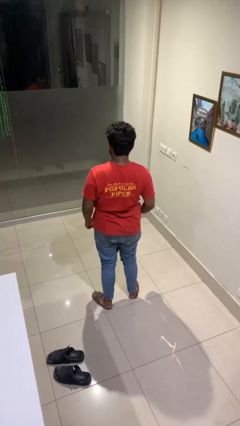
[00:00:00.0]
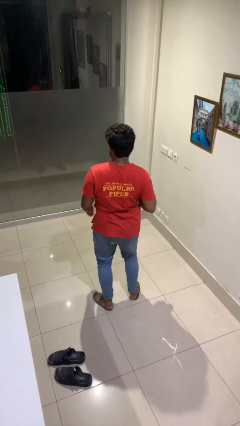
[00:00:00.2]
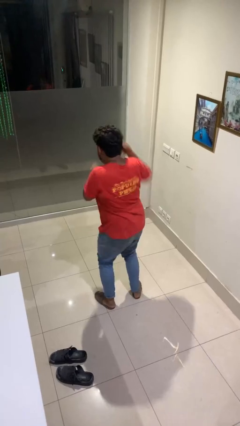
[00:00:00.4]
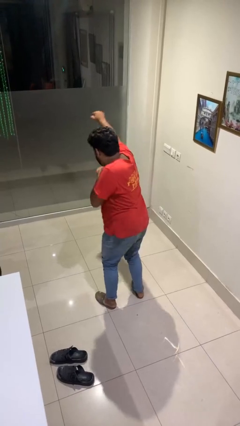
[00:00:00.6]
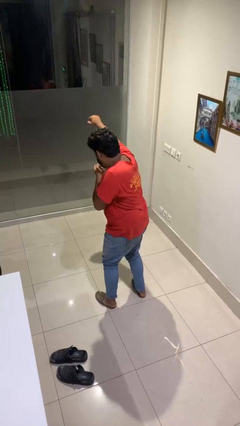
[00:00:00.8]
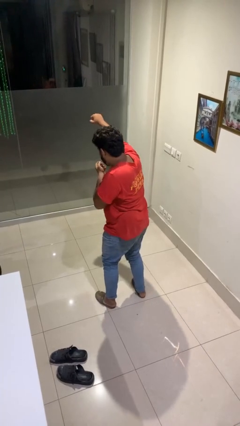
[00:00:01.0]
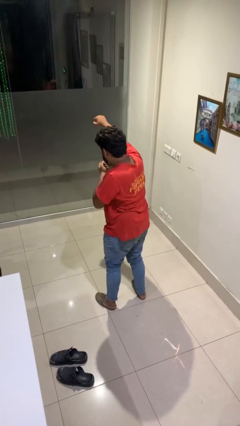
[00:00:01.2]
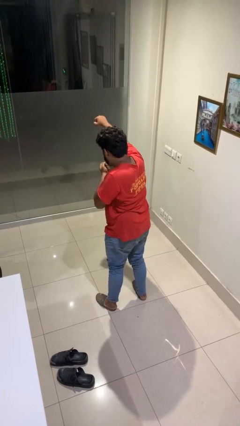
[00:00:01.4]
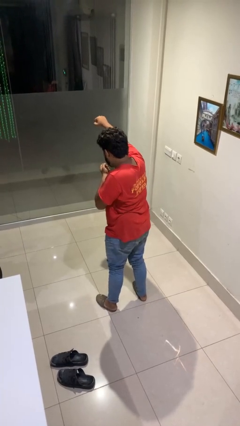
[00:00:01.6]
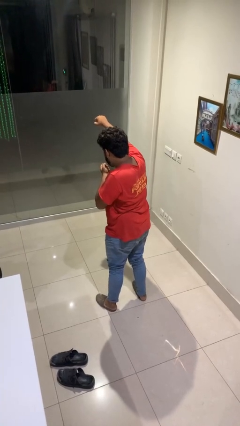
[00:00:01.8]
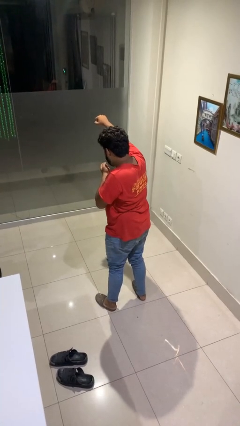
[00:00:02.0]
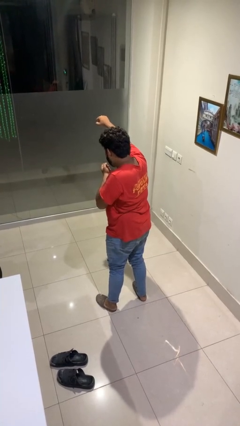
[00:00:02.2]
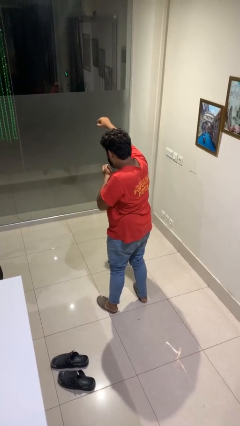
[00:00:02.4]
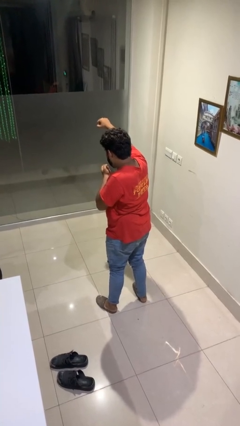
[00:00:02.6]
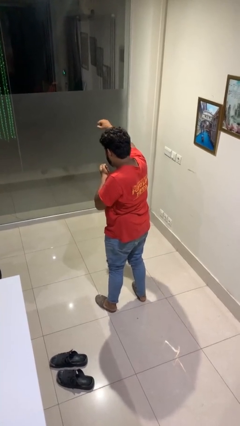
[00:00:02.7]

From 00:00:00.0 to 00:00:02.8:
person punches

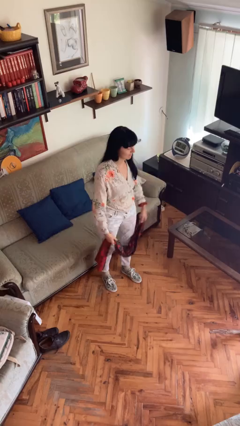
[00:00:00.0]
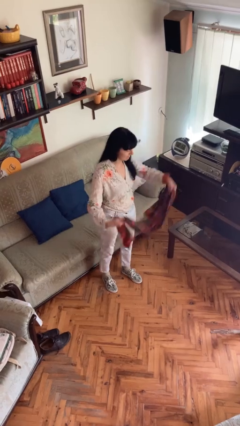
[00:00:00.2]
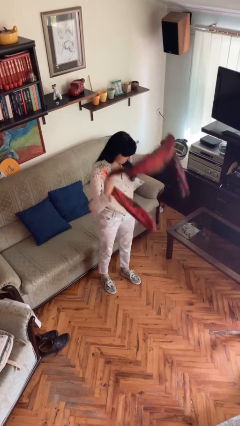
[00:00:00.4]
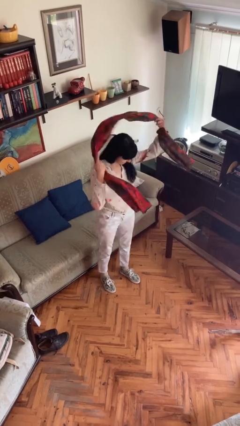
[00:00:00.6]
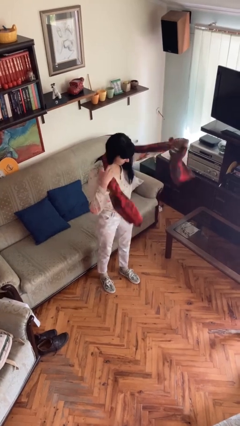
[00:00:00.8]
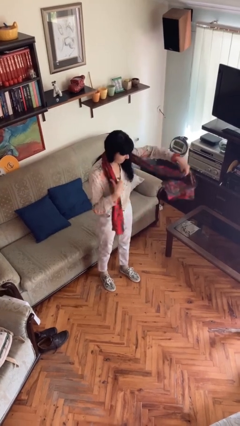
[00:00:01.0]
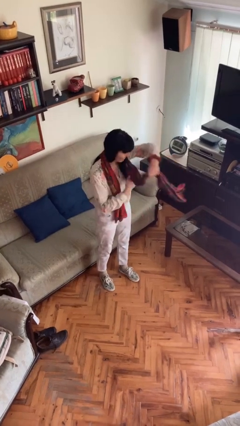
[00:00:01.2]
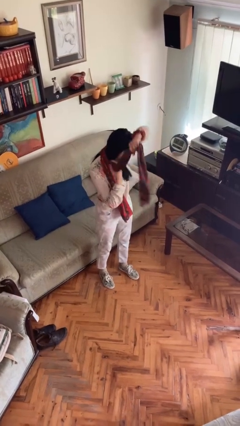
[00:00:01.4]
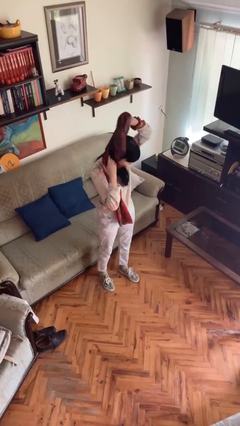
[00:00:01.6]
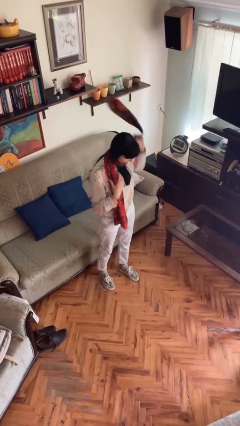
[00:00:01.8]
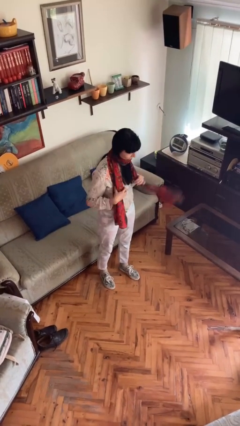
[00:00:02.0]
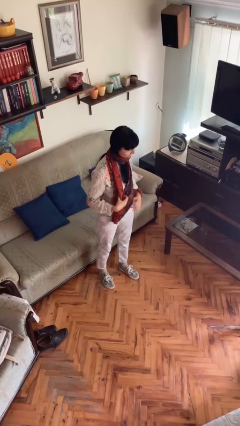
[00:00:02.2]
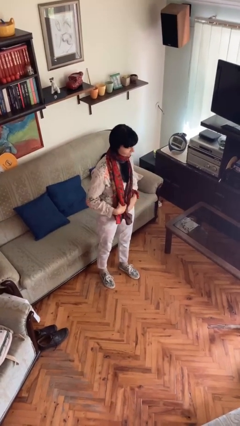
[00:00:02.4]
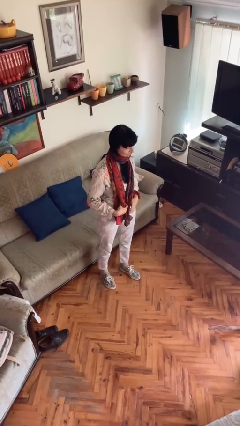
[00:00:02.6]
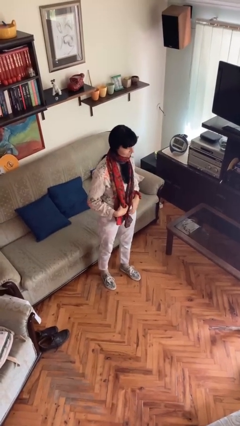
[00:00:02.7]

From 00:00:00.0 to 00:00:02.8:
person puts on scarf

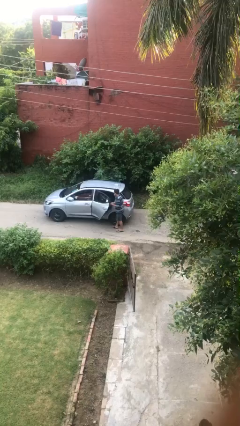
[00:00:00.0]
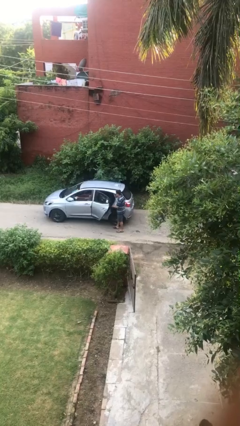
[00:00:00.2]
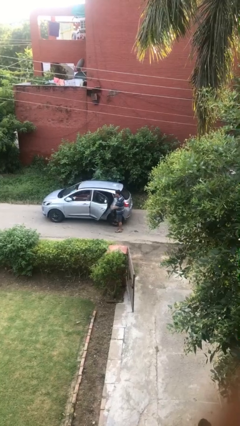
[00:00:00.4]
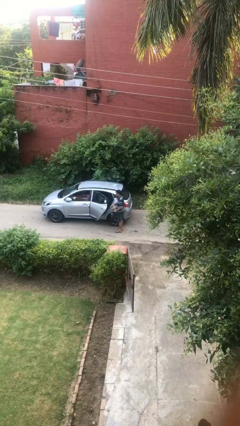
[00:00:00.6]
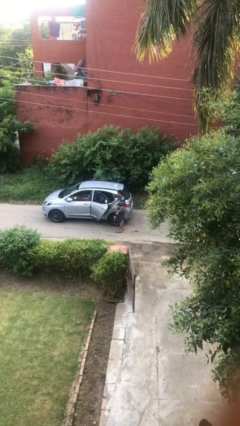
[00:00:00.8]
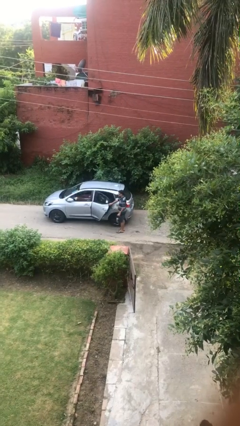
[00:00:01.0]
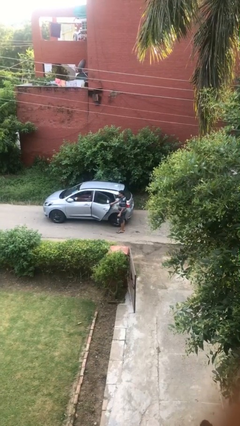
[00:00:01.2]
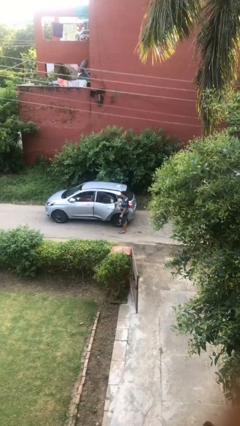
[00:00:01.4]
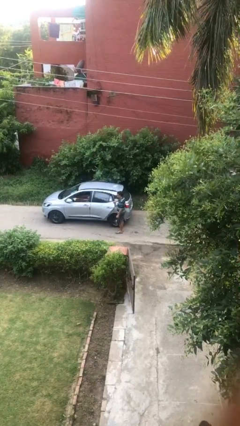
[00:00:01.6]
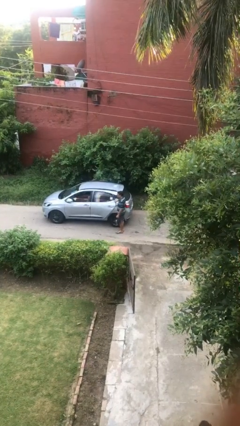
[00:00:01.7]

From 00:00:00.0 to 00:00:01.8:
person unloads car

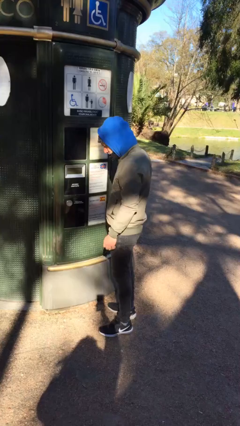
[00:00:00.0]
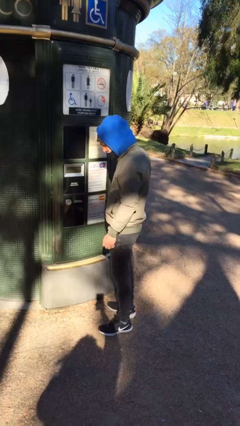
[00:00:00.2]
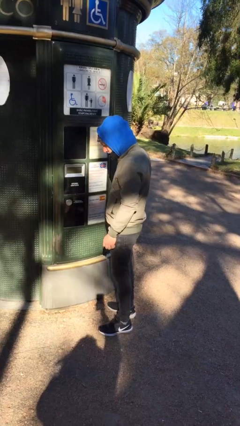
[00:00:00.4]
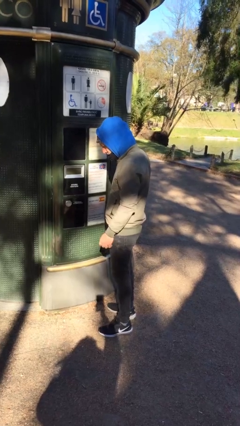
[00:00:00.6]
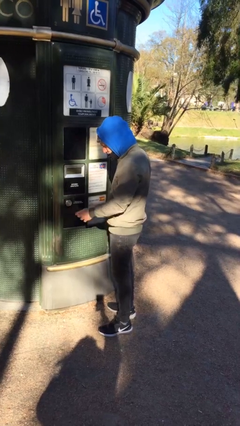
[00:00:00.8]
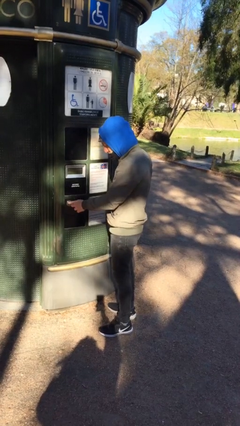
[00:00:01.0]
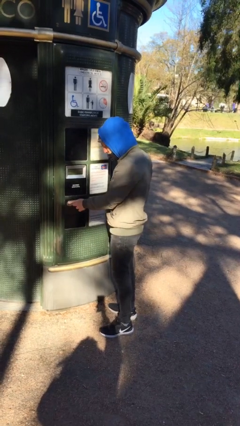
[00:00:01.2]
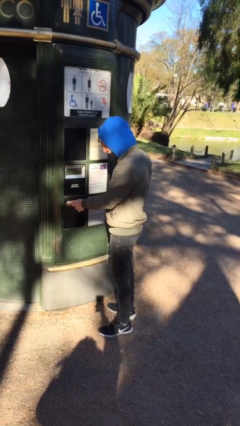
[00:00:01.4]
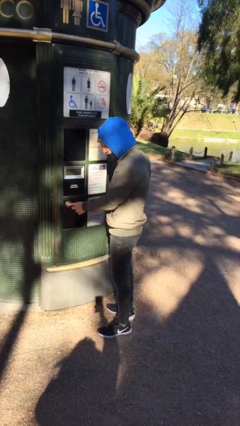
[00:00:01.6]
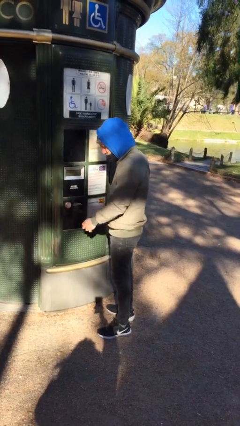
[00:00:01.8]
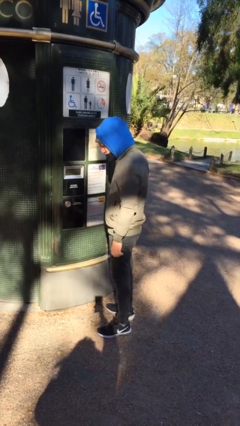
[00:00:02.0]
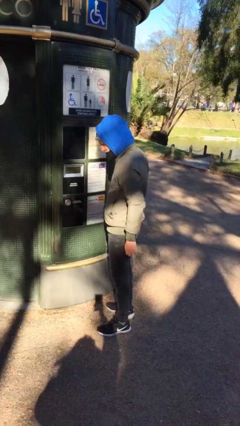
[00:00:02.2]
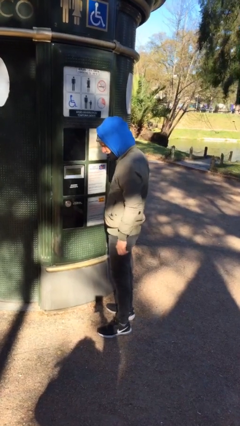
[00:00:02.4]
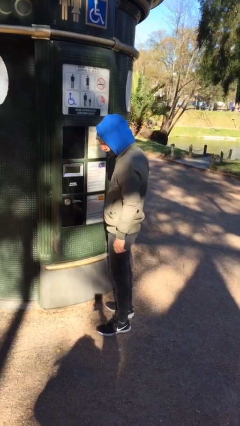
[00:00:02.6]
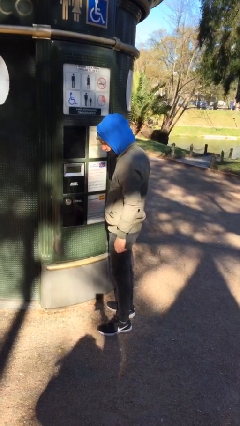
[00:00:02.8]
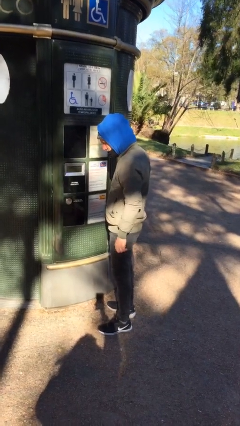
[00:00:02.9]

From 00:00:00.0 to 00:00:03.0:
person purchases from machine

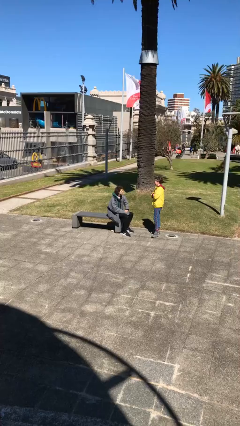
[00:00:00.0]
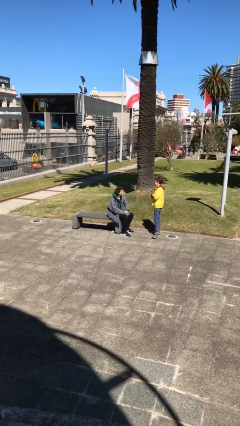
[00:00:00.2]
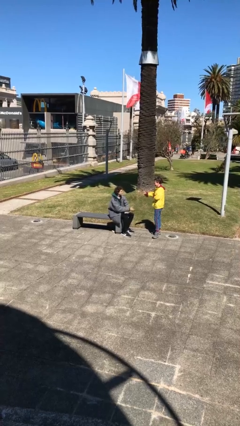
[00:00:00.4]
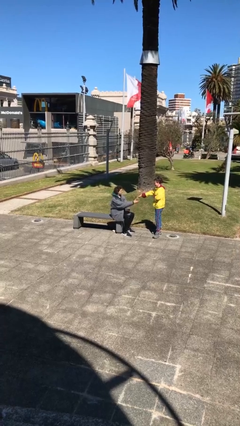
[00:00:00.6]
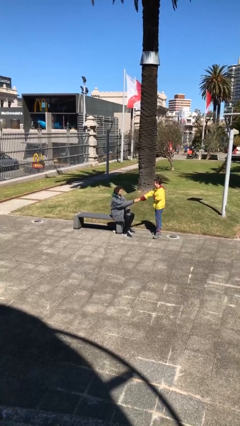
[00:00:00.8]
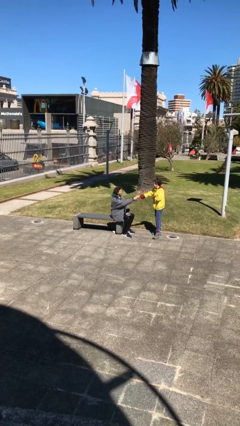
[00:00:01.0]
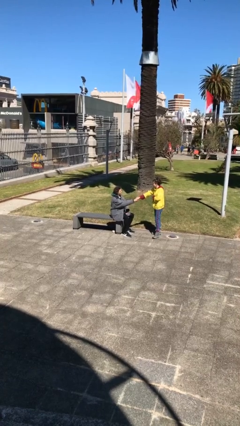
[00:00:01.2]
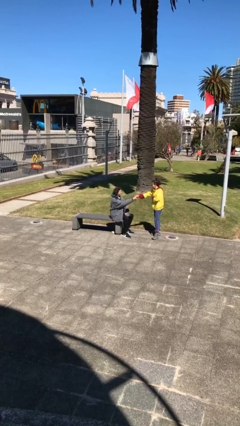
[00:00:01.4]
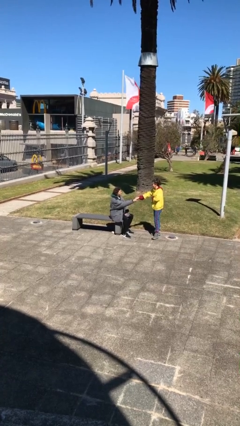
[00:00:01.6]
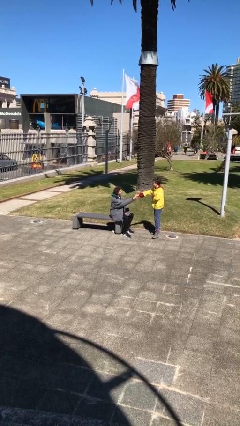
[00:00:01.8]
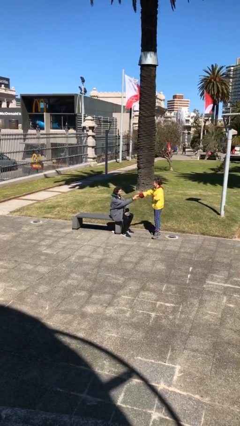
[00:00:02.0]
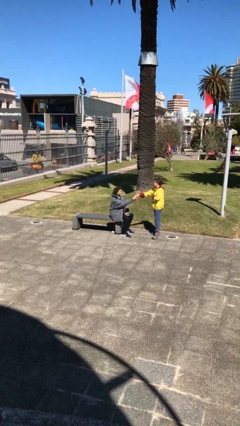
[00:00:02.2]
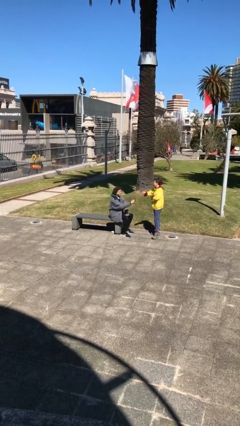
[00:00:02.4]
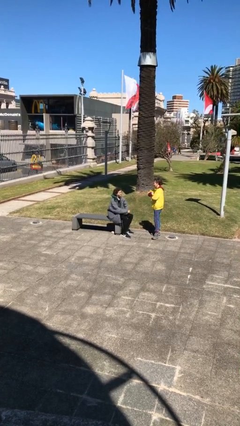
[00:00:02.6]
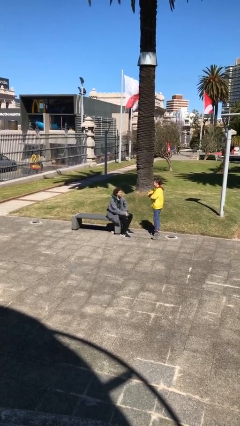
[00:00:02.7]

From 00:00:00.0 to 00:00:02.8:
person shakes hand

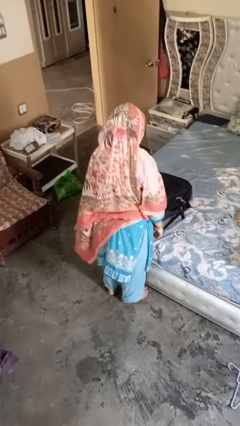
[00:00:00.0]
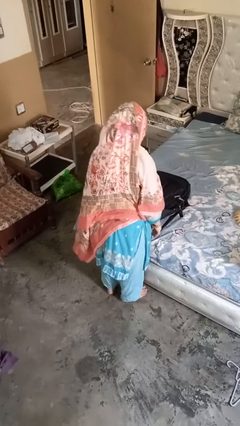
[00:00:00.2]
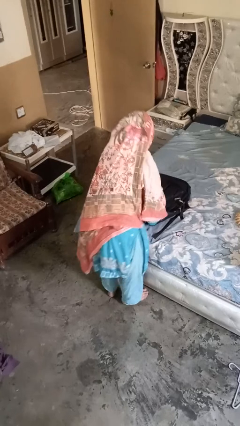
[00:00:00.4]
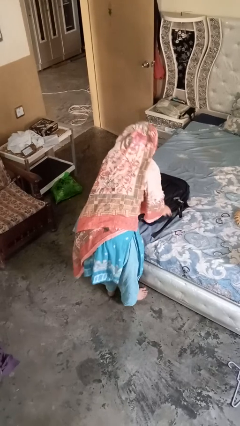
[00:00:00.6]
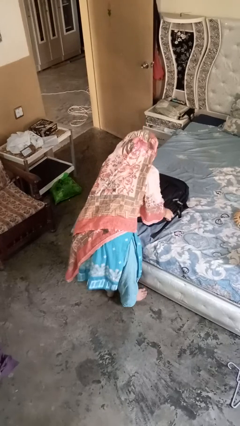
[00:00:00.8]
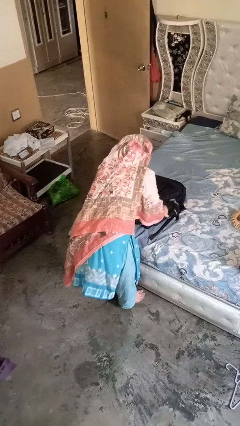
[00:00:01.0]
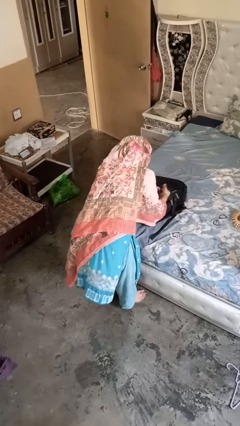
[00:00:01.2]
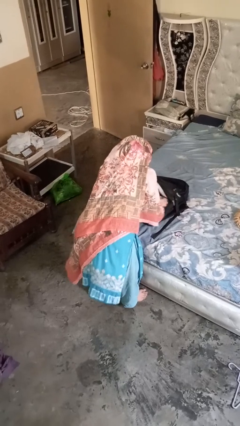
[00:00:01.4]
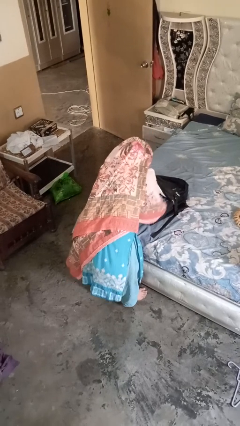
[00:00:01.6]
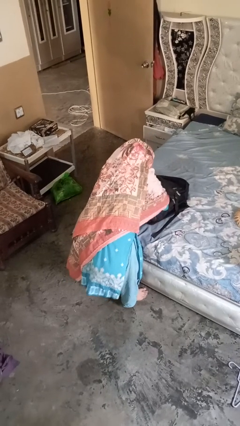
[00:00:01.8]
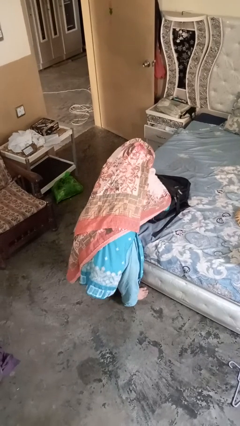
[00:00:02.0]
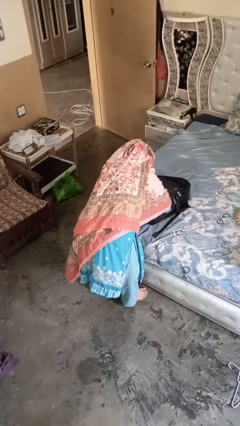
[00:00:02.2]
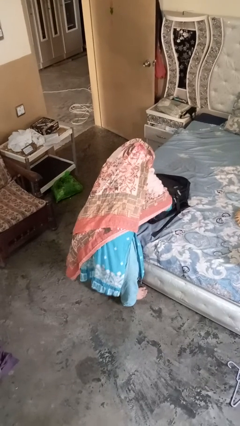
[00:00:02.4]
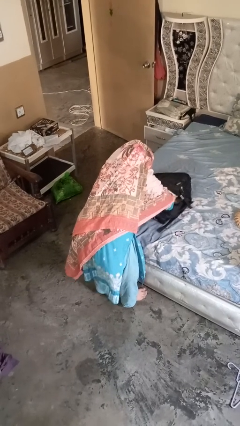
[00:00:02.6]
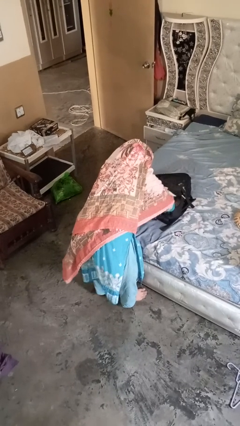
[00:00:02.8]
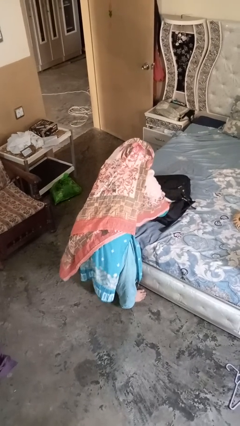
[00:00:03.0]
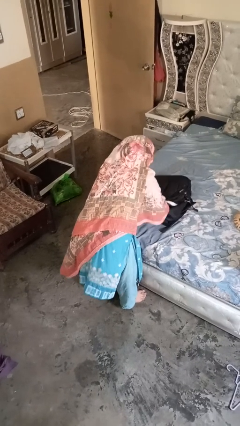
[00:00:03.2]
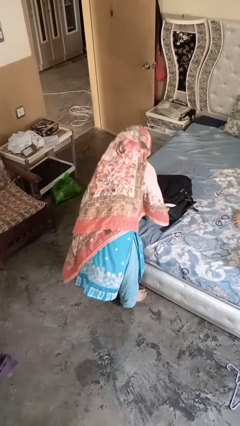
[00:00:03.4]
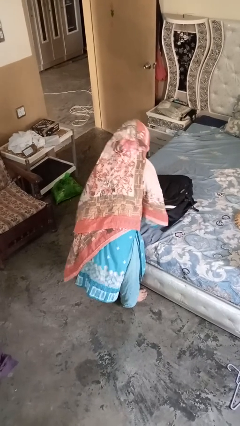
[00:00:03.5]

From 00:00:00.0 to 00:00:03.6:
person searches in bag
